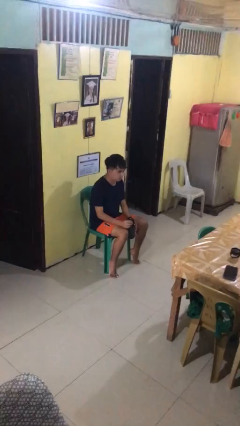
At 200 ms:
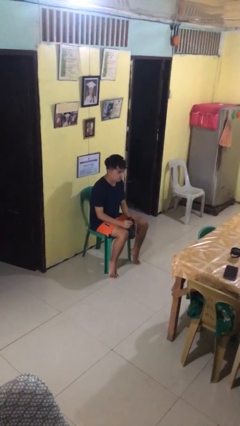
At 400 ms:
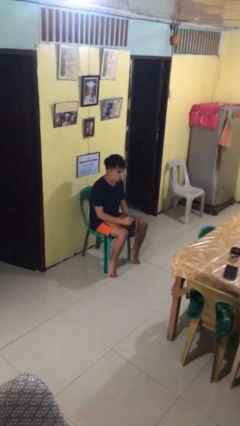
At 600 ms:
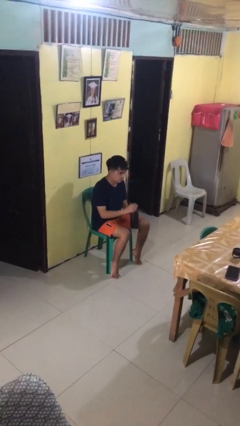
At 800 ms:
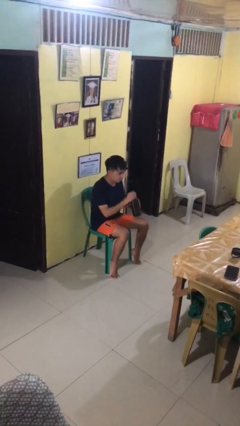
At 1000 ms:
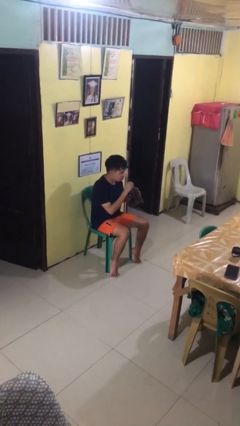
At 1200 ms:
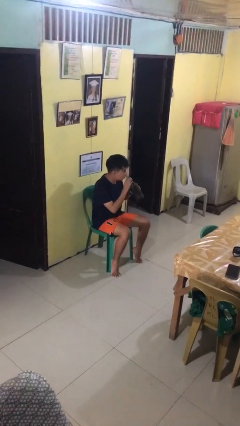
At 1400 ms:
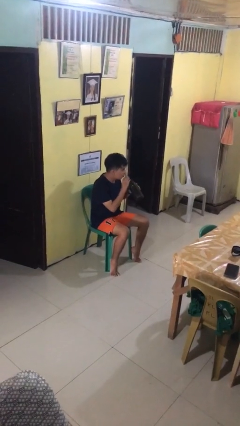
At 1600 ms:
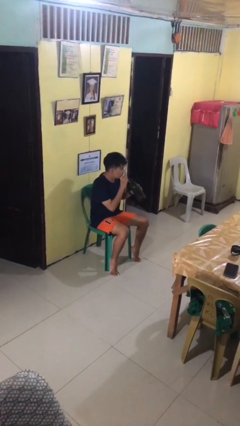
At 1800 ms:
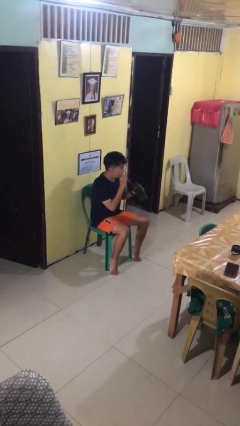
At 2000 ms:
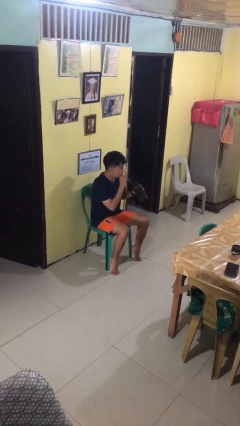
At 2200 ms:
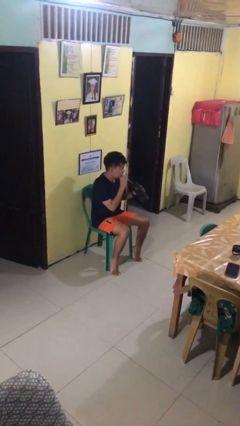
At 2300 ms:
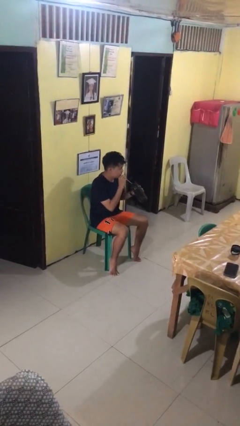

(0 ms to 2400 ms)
person drinks from straw

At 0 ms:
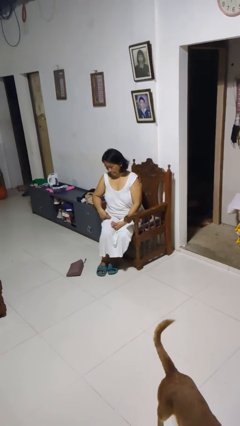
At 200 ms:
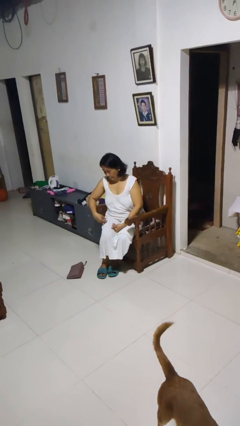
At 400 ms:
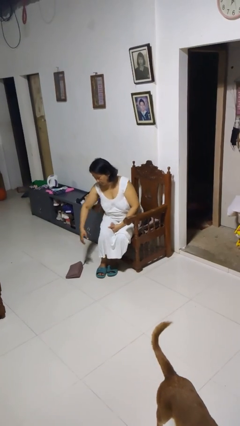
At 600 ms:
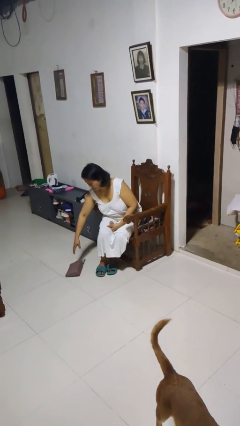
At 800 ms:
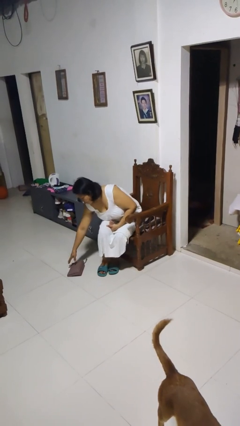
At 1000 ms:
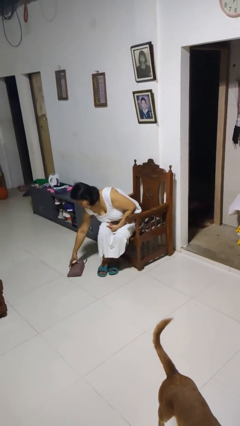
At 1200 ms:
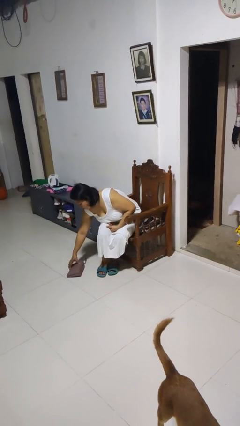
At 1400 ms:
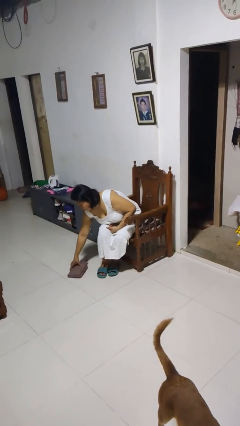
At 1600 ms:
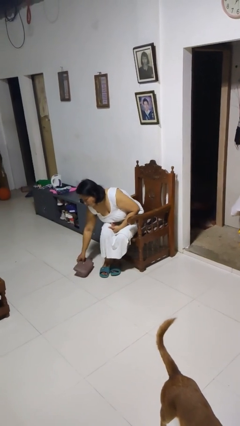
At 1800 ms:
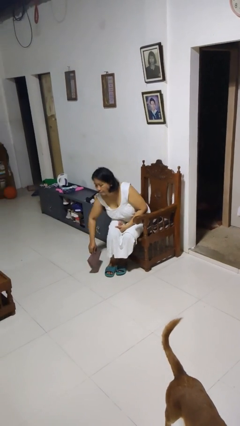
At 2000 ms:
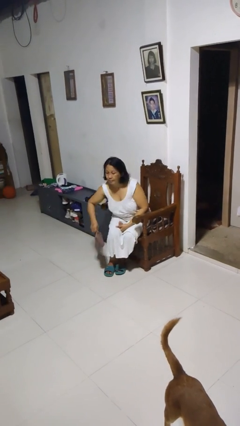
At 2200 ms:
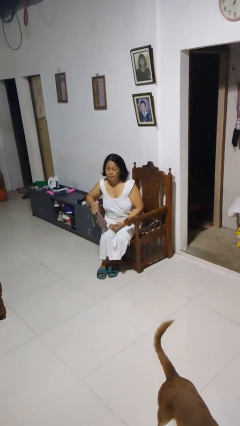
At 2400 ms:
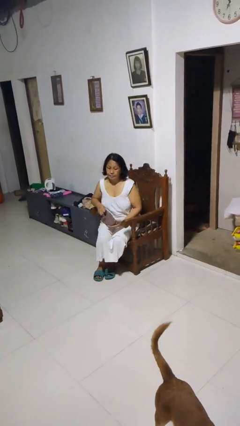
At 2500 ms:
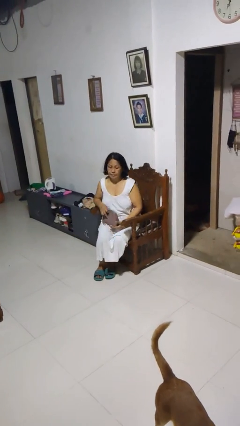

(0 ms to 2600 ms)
person picks up object from floor

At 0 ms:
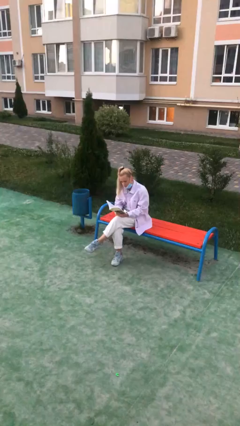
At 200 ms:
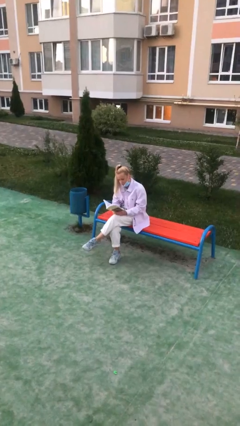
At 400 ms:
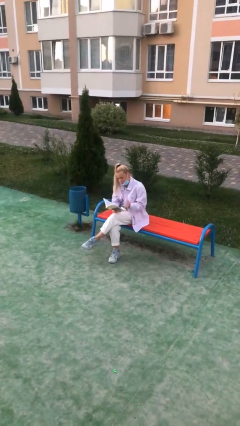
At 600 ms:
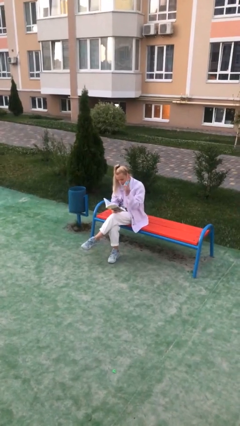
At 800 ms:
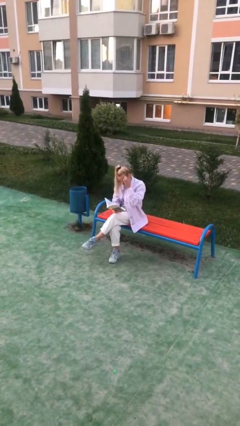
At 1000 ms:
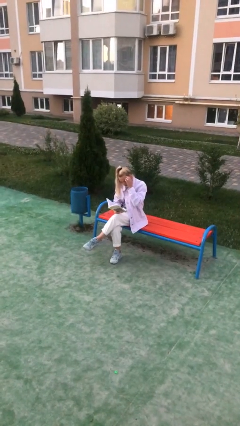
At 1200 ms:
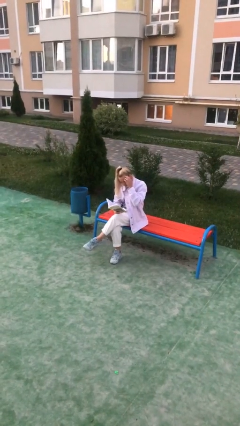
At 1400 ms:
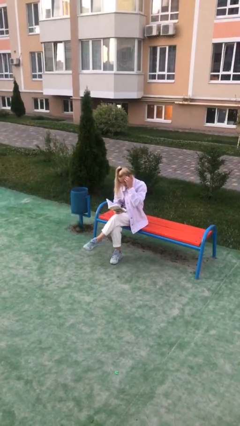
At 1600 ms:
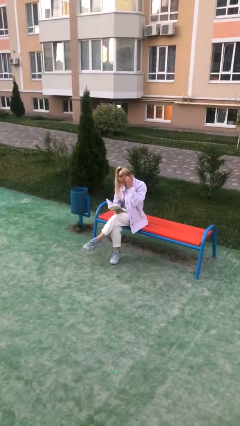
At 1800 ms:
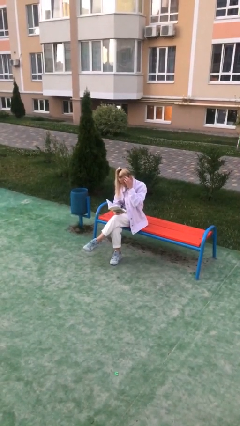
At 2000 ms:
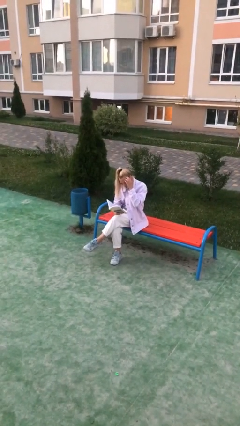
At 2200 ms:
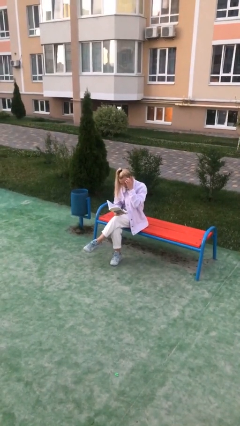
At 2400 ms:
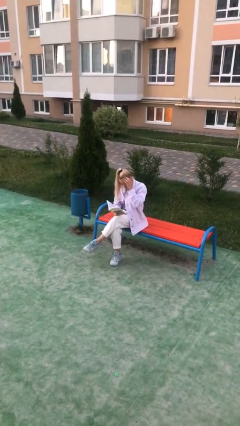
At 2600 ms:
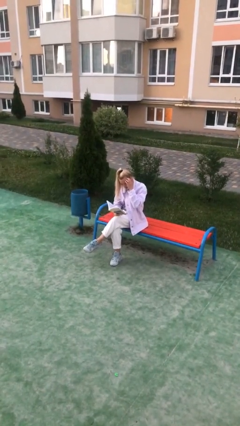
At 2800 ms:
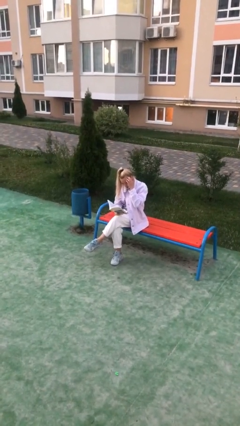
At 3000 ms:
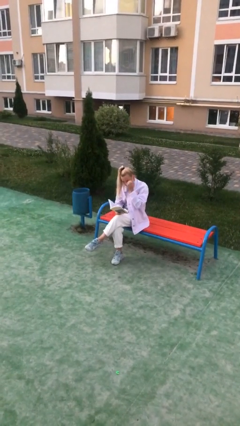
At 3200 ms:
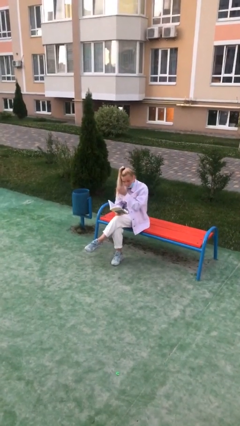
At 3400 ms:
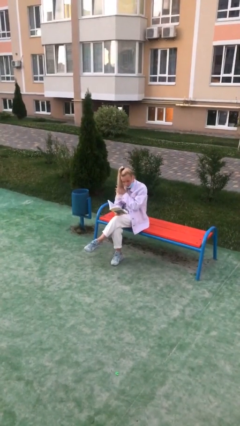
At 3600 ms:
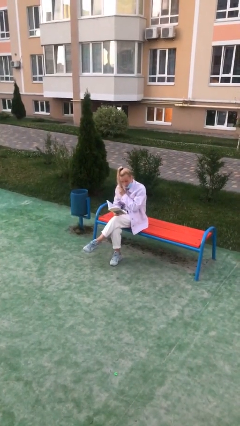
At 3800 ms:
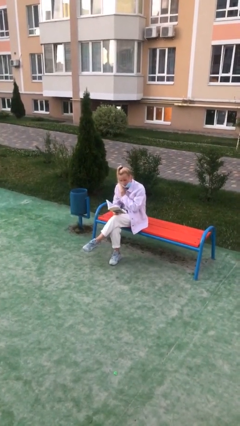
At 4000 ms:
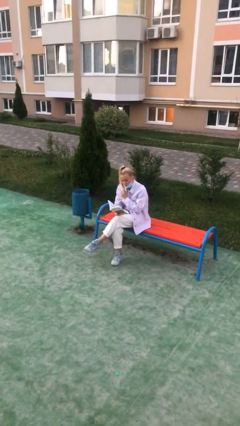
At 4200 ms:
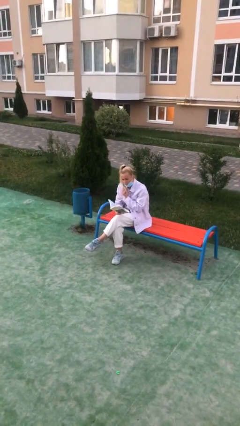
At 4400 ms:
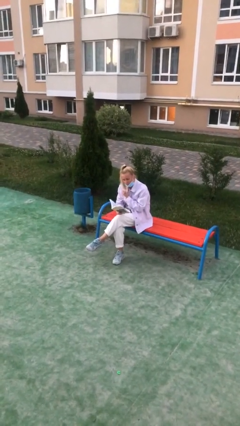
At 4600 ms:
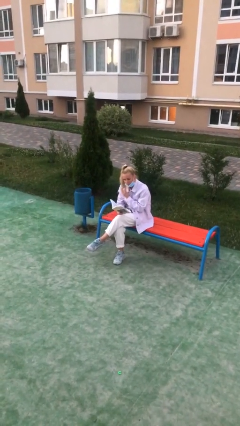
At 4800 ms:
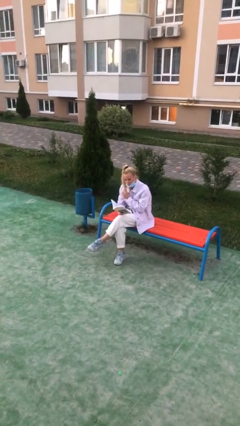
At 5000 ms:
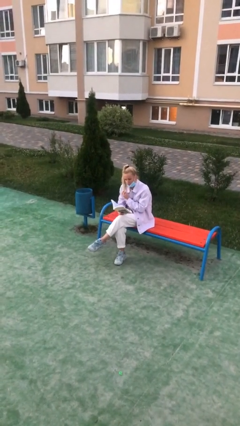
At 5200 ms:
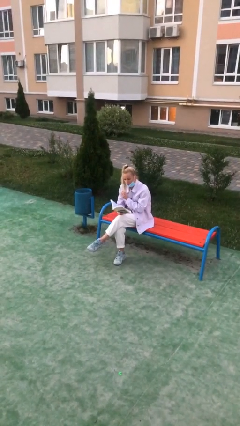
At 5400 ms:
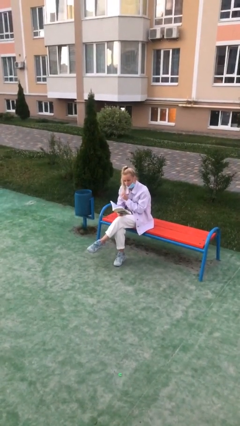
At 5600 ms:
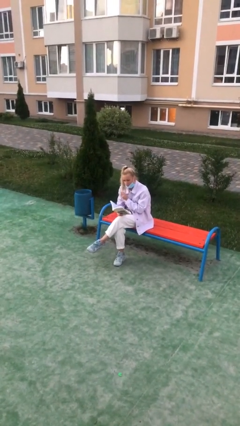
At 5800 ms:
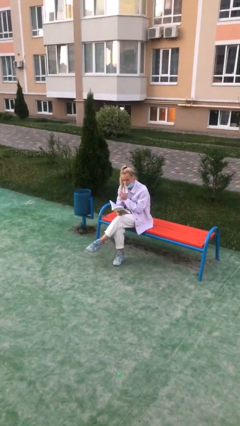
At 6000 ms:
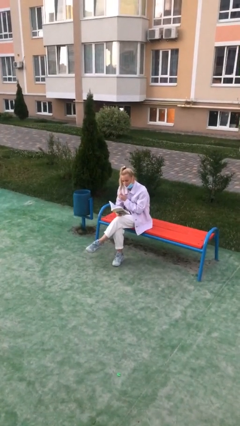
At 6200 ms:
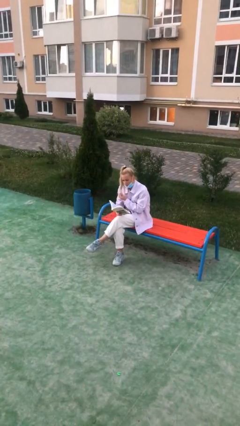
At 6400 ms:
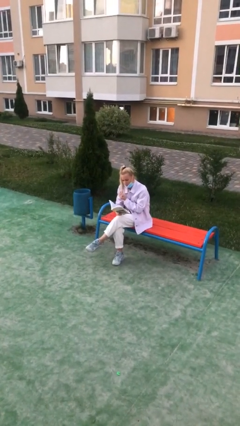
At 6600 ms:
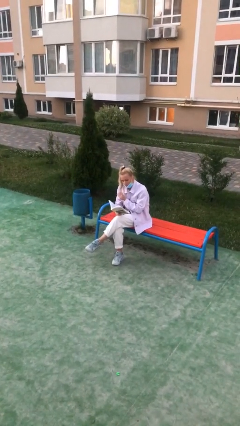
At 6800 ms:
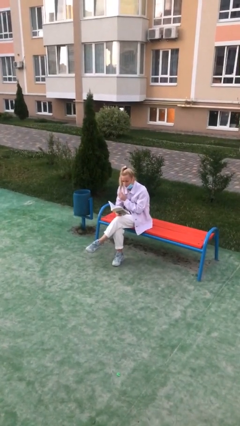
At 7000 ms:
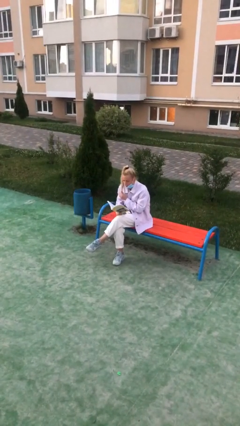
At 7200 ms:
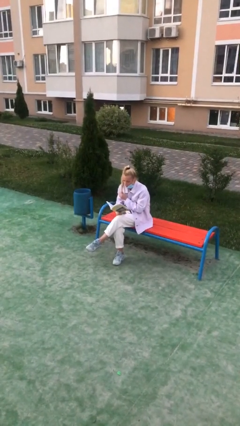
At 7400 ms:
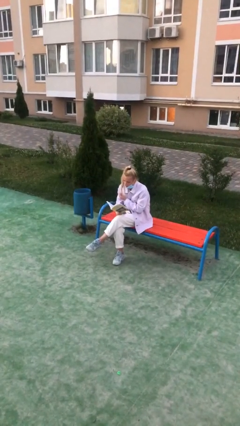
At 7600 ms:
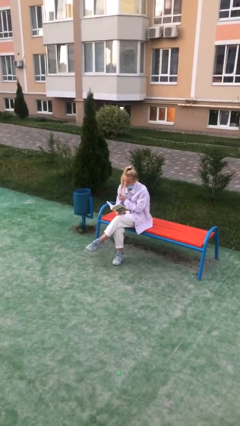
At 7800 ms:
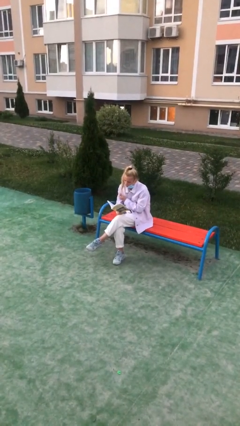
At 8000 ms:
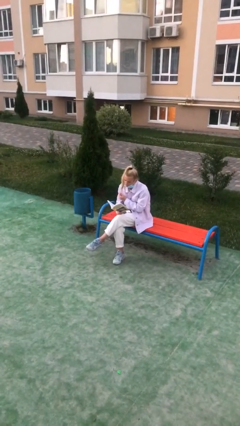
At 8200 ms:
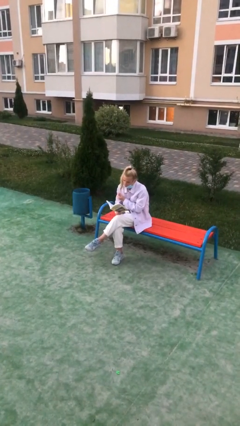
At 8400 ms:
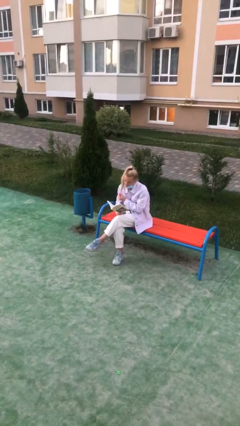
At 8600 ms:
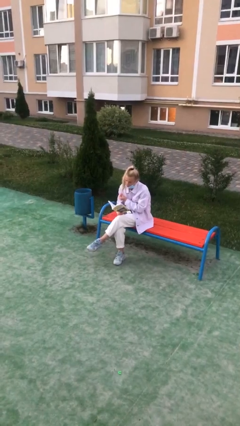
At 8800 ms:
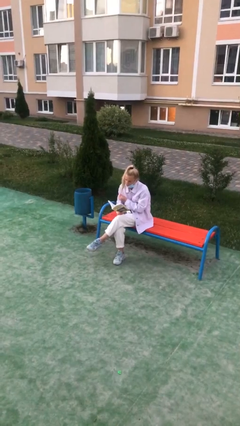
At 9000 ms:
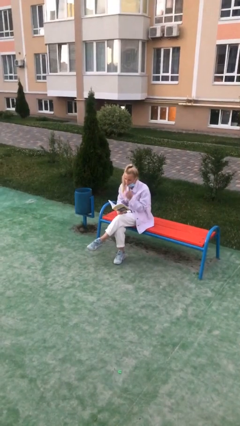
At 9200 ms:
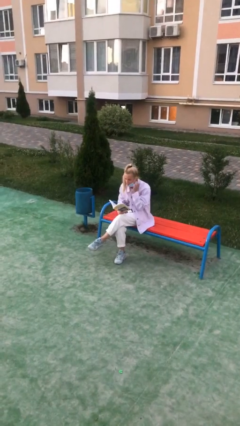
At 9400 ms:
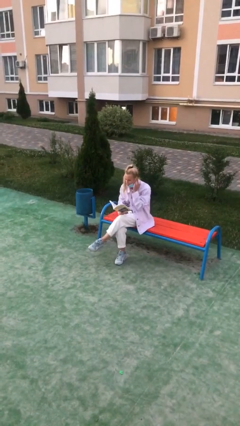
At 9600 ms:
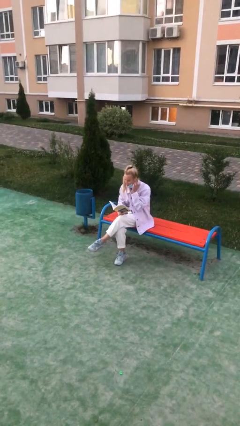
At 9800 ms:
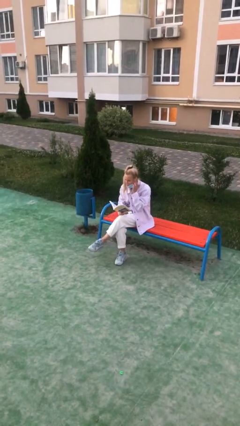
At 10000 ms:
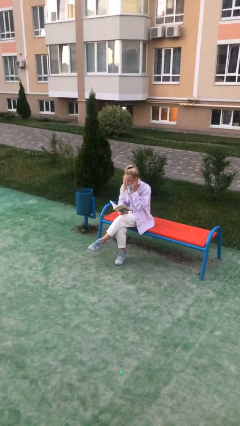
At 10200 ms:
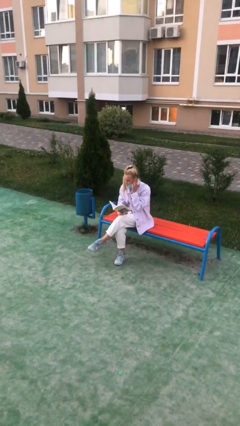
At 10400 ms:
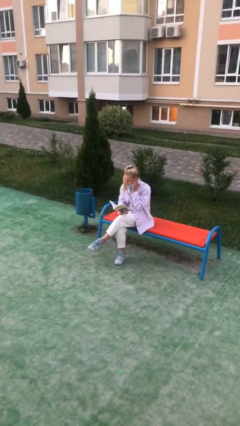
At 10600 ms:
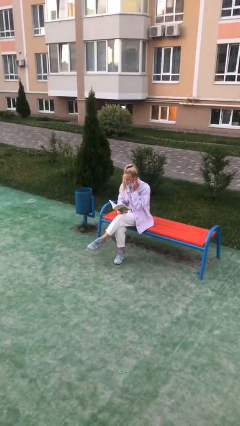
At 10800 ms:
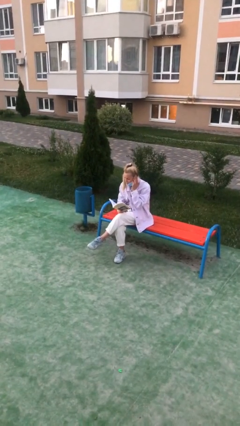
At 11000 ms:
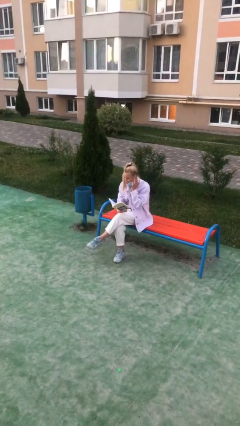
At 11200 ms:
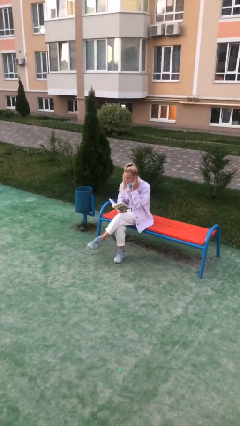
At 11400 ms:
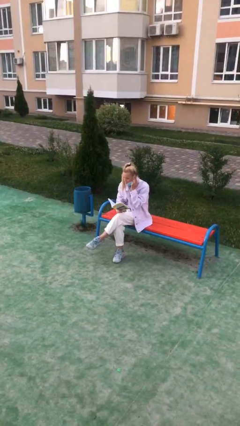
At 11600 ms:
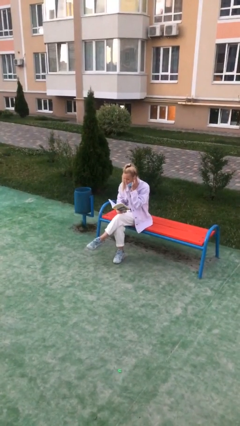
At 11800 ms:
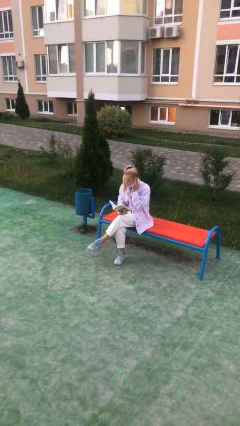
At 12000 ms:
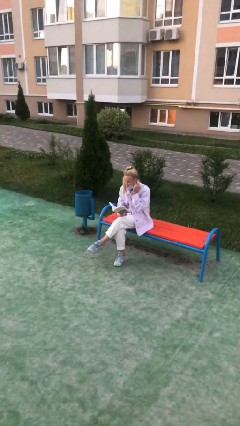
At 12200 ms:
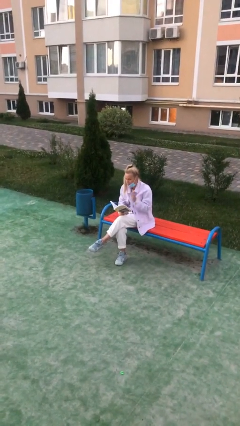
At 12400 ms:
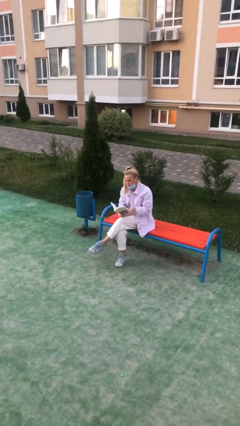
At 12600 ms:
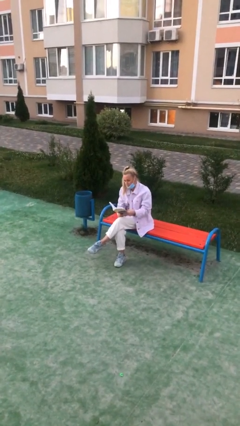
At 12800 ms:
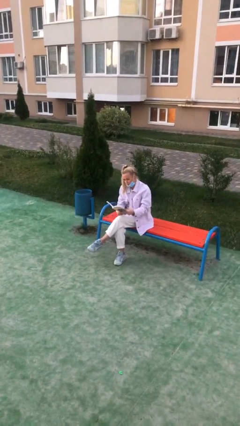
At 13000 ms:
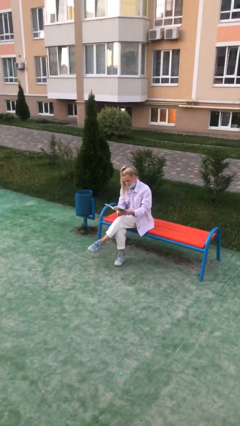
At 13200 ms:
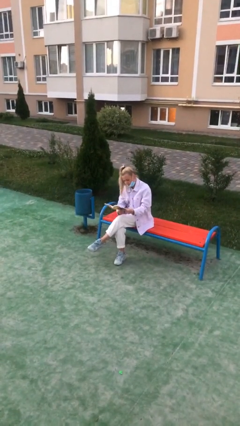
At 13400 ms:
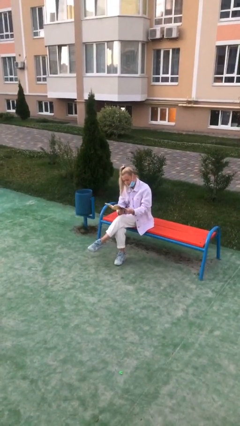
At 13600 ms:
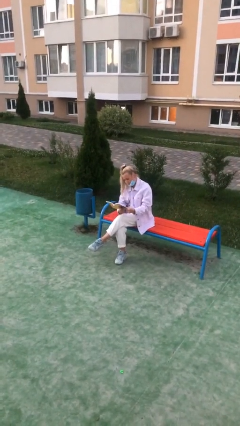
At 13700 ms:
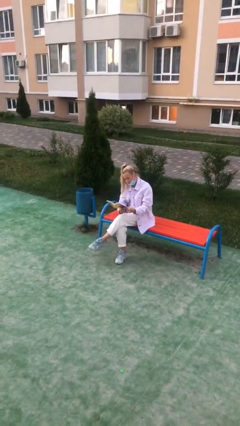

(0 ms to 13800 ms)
person reads document
